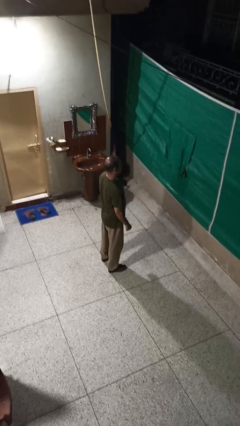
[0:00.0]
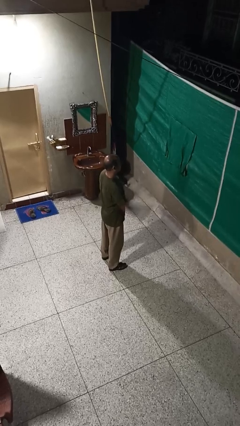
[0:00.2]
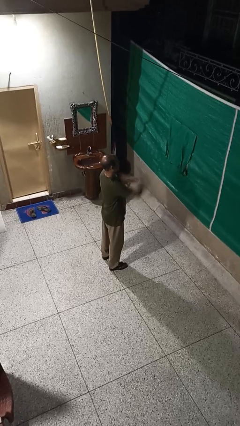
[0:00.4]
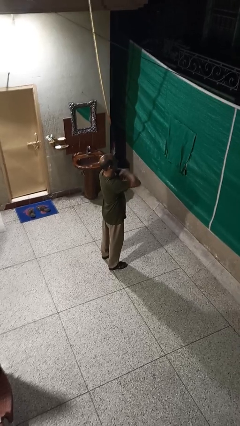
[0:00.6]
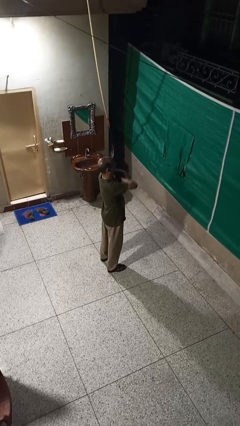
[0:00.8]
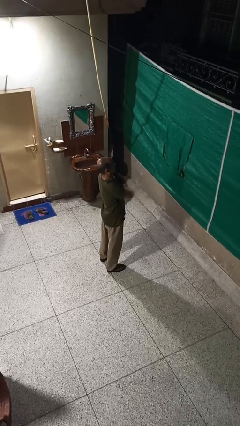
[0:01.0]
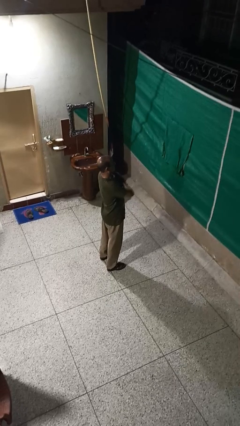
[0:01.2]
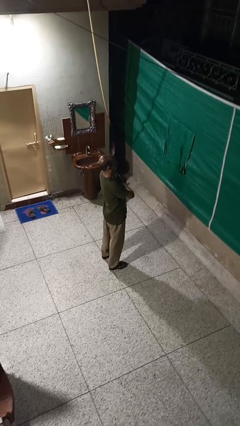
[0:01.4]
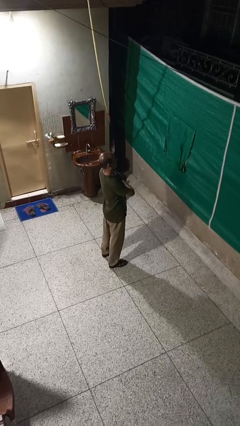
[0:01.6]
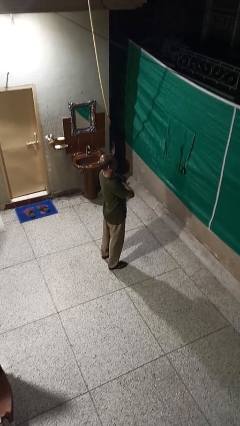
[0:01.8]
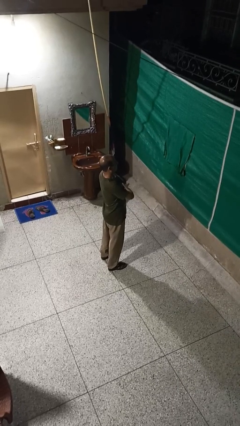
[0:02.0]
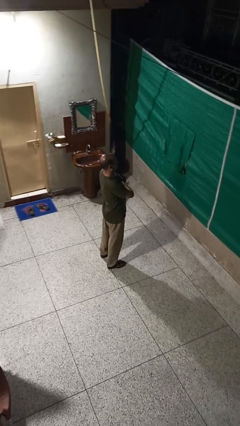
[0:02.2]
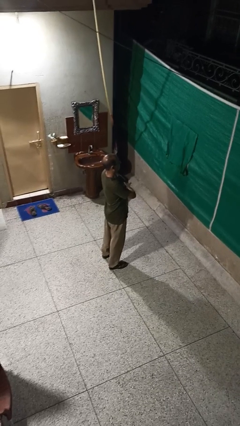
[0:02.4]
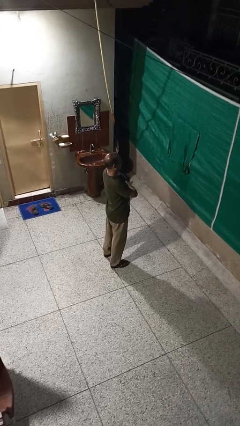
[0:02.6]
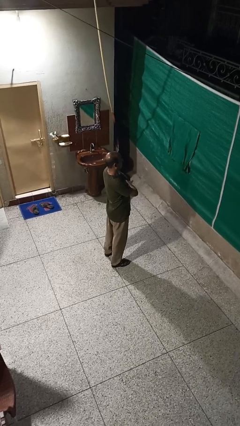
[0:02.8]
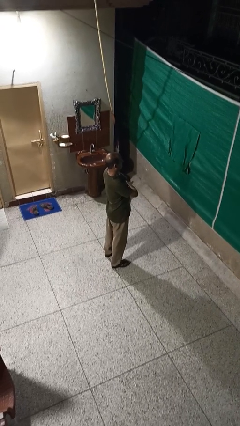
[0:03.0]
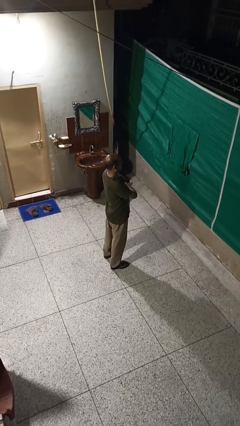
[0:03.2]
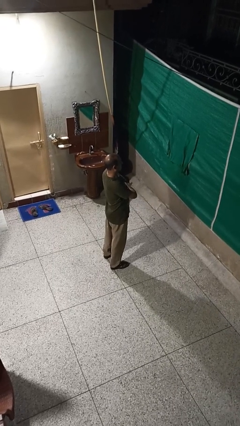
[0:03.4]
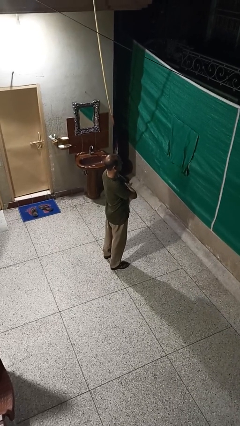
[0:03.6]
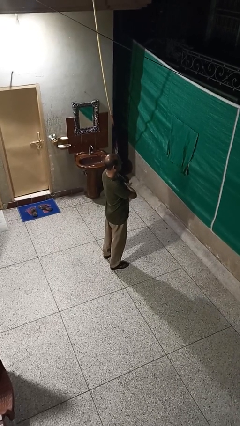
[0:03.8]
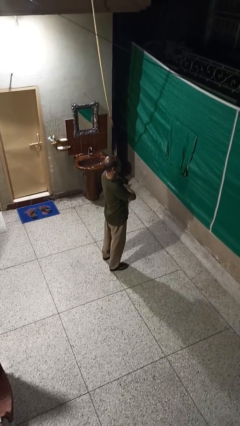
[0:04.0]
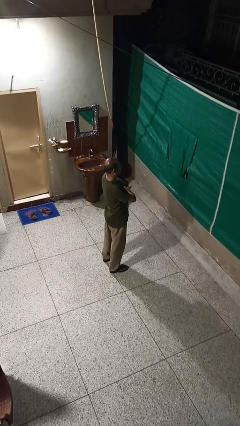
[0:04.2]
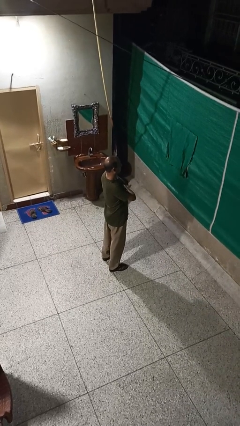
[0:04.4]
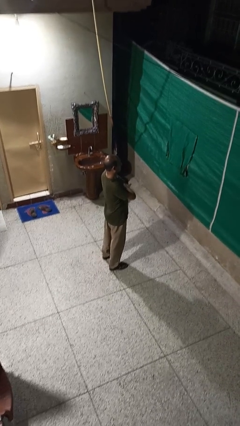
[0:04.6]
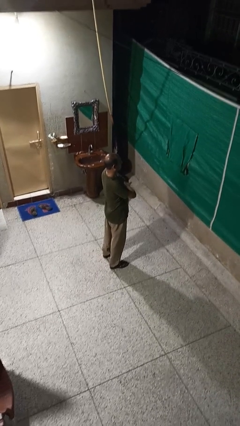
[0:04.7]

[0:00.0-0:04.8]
person crosses arms

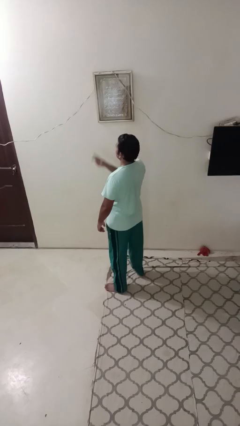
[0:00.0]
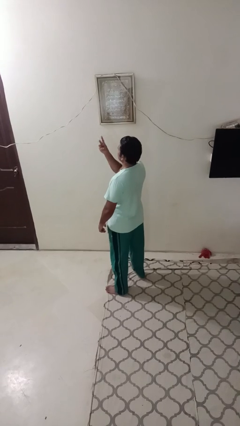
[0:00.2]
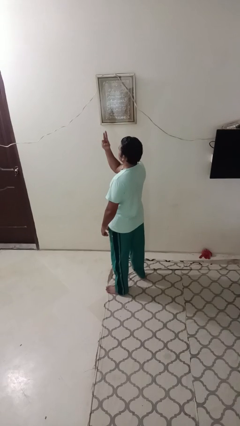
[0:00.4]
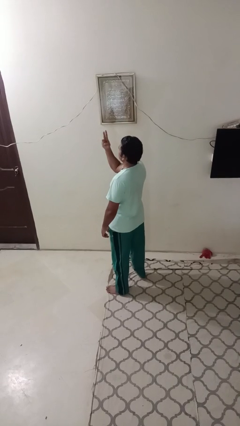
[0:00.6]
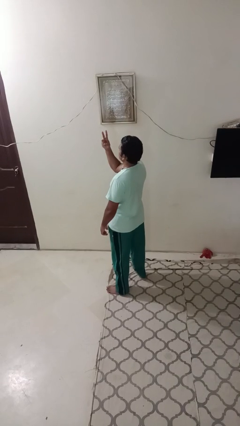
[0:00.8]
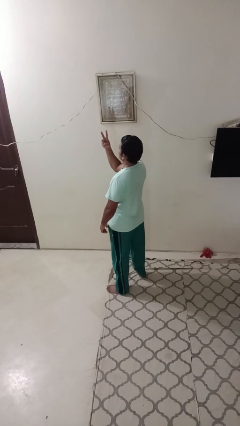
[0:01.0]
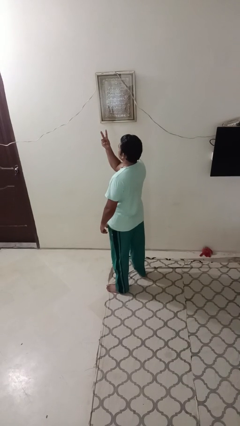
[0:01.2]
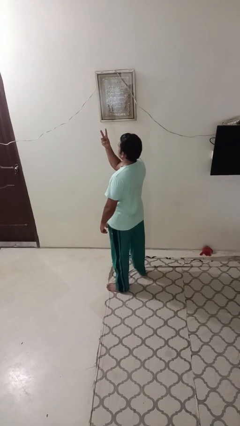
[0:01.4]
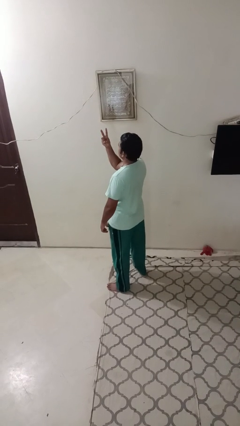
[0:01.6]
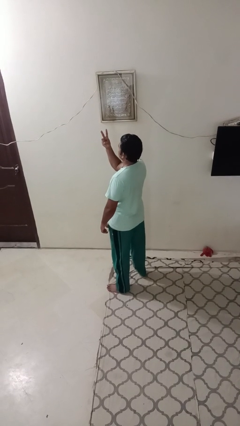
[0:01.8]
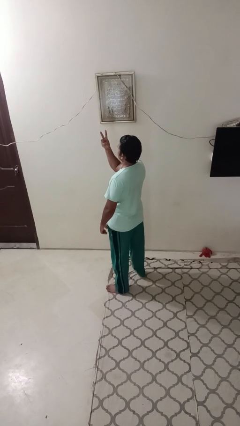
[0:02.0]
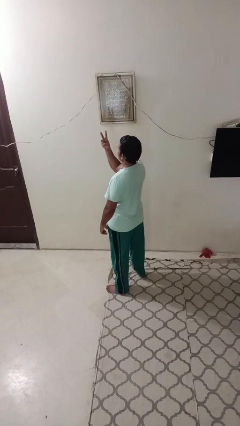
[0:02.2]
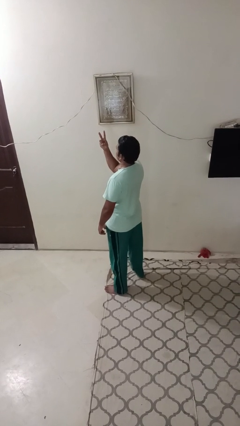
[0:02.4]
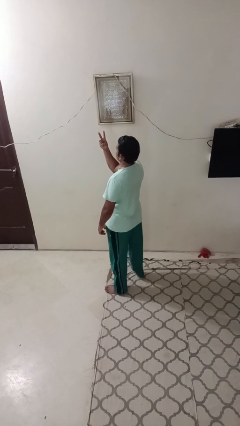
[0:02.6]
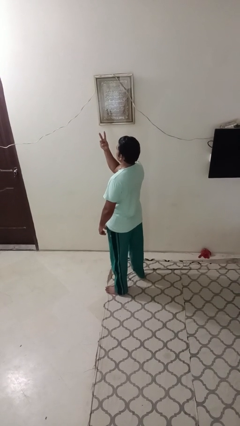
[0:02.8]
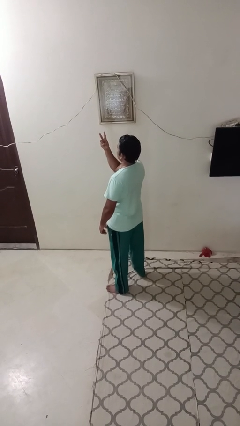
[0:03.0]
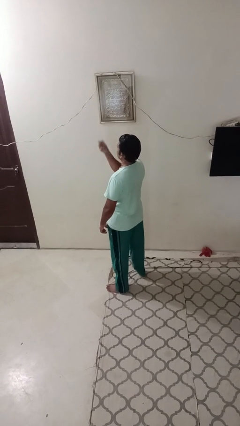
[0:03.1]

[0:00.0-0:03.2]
person gestures peace

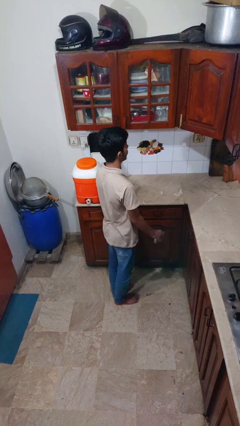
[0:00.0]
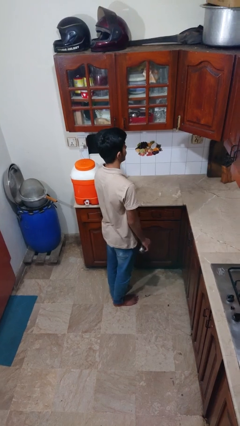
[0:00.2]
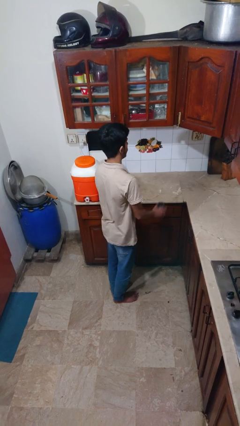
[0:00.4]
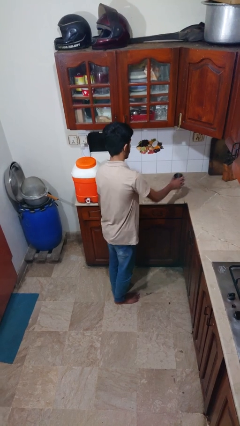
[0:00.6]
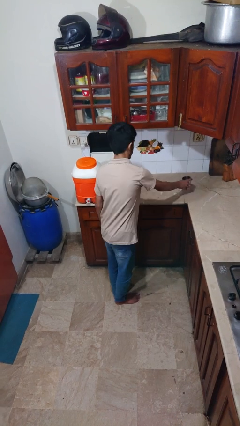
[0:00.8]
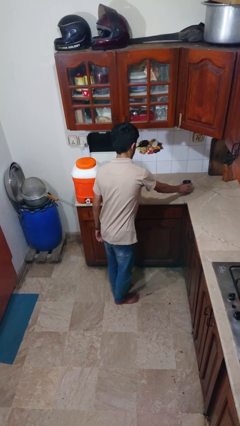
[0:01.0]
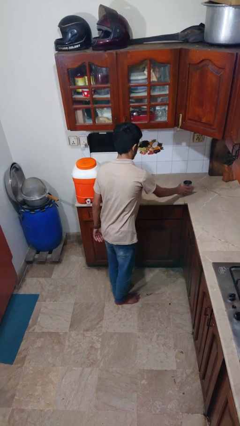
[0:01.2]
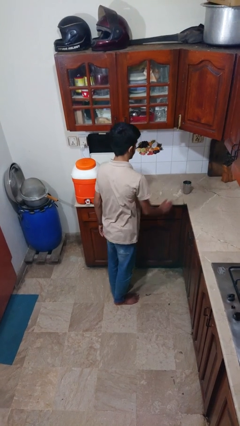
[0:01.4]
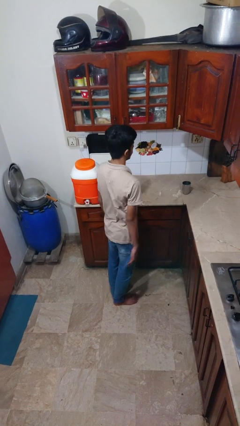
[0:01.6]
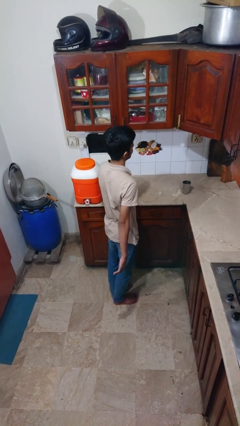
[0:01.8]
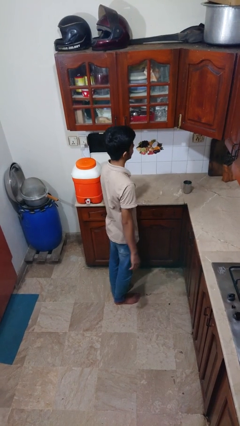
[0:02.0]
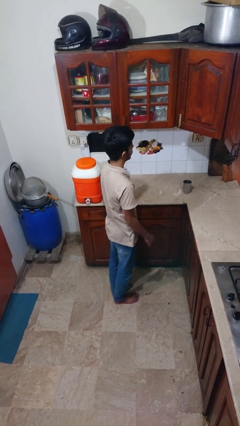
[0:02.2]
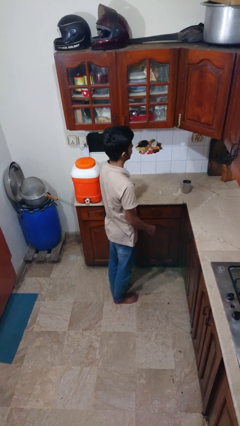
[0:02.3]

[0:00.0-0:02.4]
person puts down object on countertop

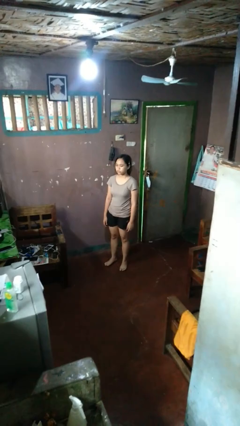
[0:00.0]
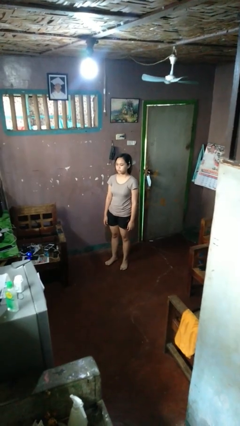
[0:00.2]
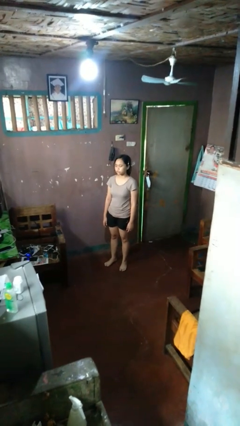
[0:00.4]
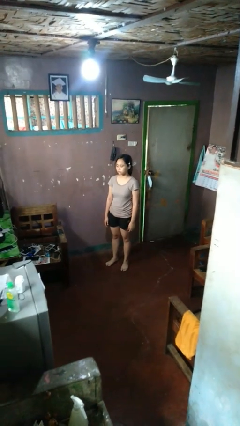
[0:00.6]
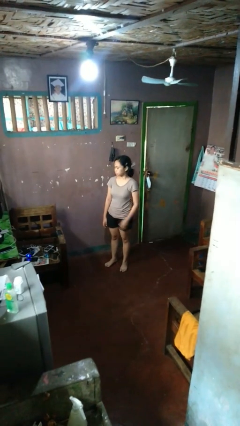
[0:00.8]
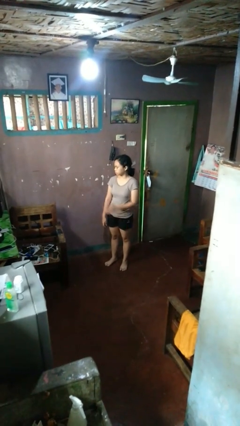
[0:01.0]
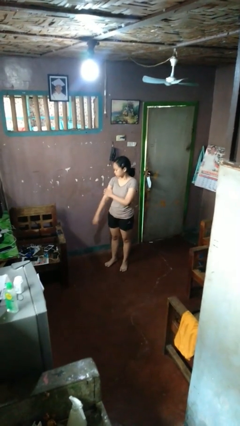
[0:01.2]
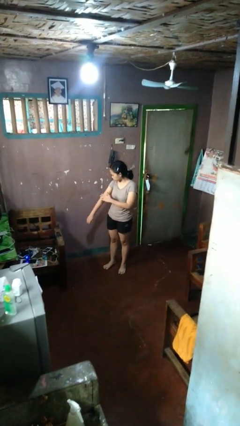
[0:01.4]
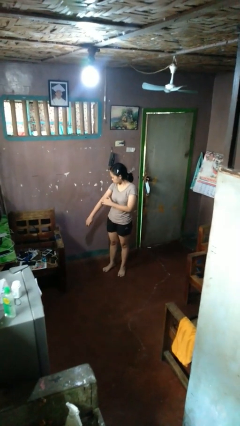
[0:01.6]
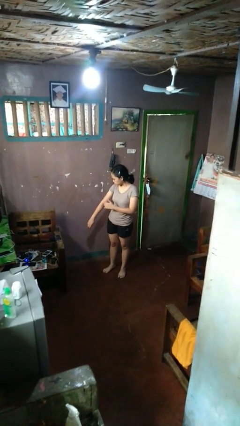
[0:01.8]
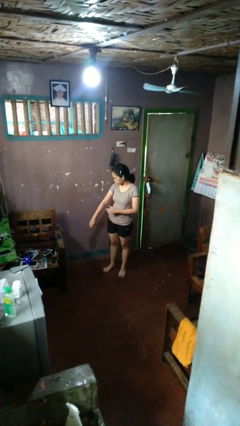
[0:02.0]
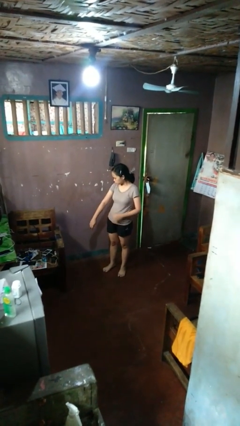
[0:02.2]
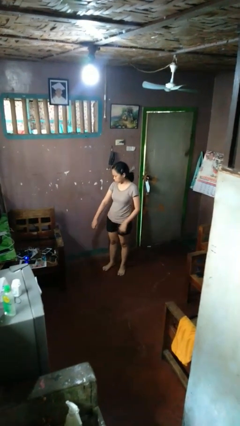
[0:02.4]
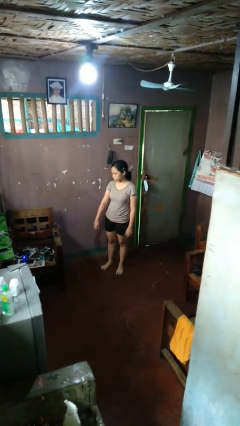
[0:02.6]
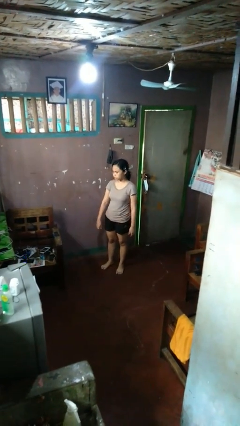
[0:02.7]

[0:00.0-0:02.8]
person swats bug

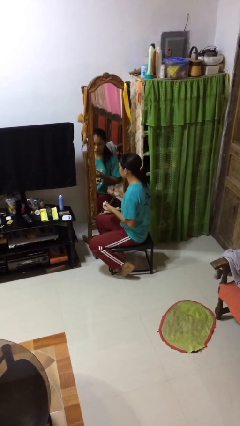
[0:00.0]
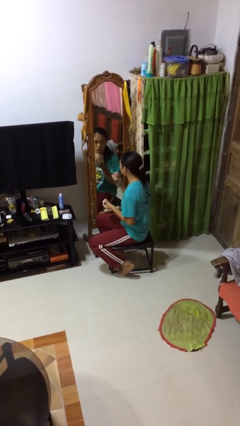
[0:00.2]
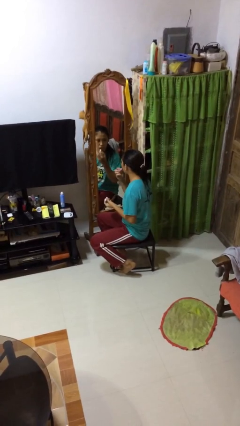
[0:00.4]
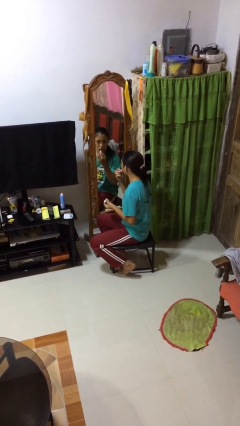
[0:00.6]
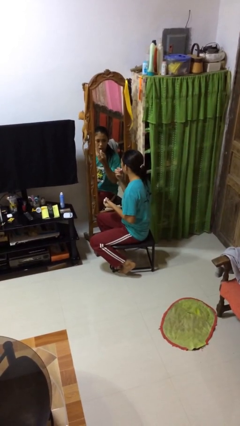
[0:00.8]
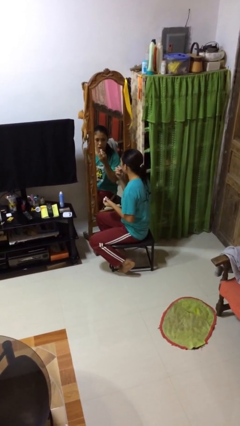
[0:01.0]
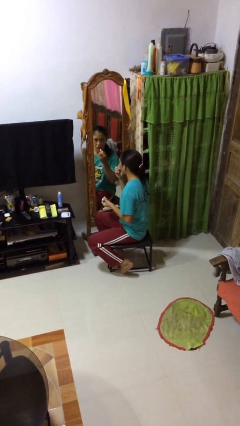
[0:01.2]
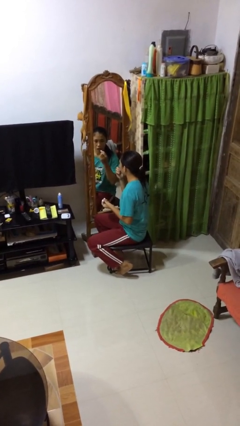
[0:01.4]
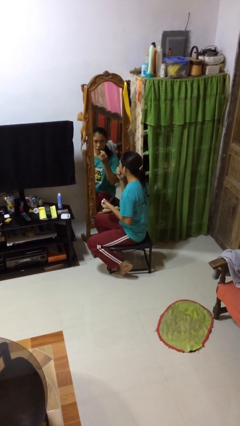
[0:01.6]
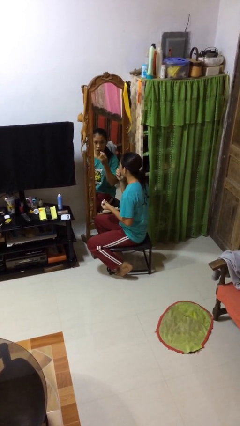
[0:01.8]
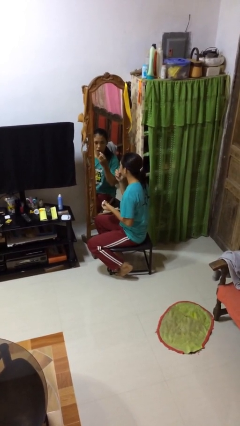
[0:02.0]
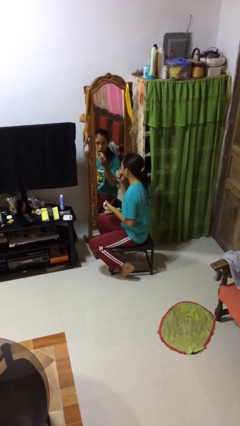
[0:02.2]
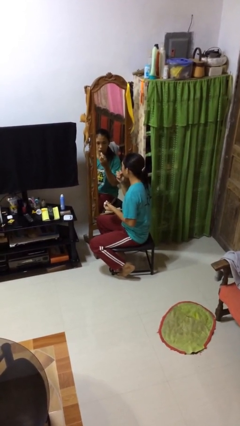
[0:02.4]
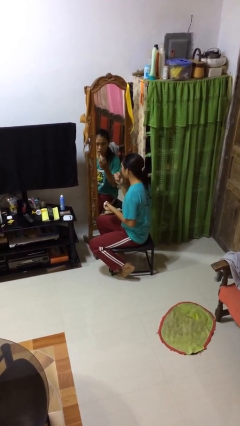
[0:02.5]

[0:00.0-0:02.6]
person applies lip makeup

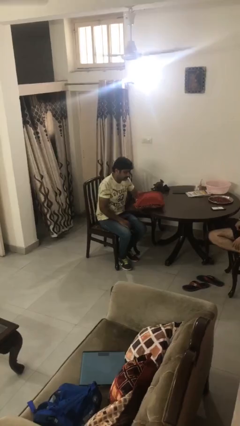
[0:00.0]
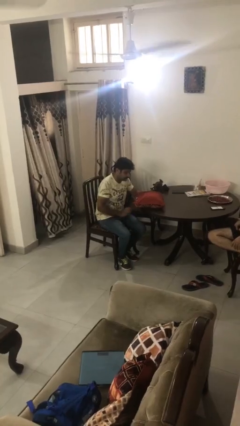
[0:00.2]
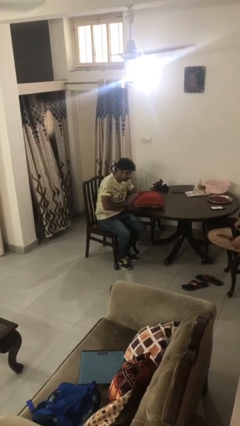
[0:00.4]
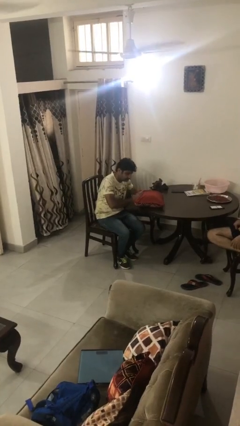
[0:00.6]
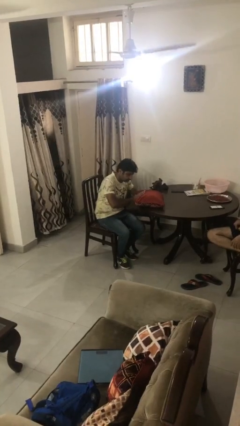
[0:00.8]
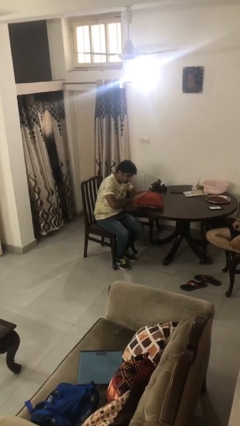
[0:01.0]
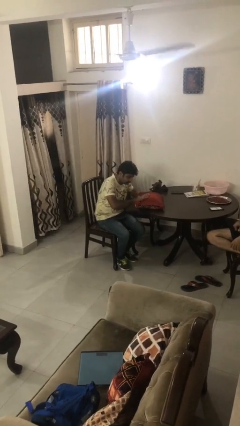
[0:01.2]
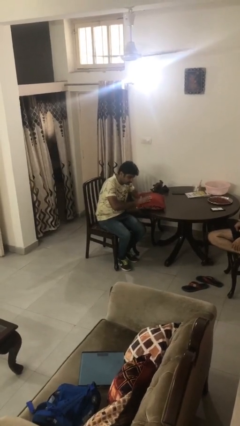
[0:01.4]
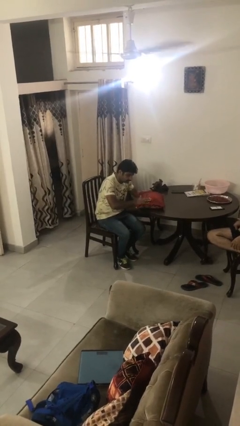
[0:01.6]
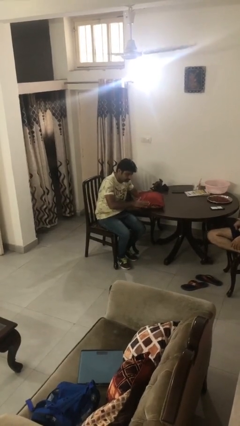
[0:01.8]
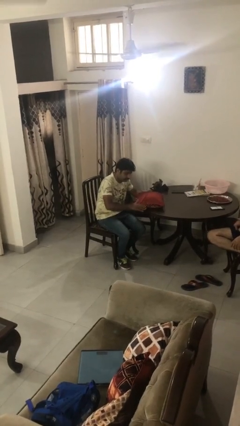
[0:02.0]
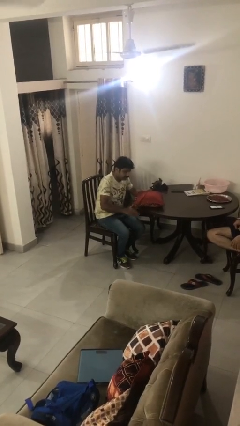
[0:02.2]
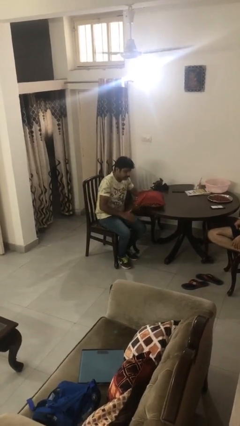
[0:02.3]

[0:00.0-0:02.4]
person waves hand over object
